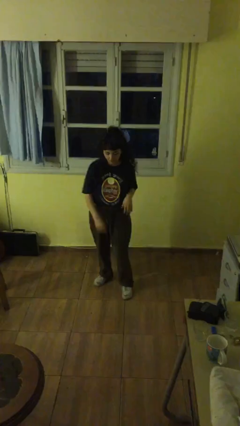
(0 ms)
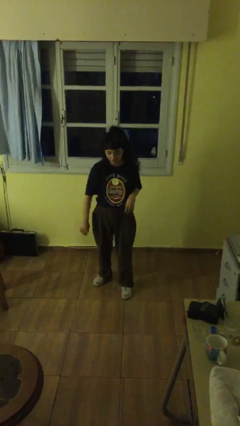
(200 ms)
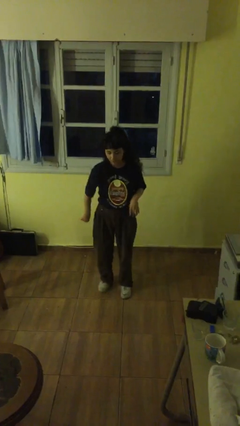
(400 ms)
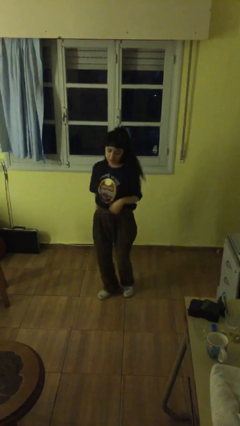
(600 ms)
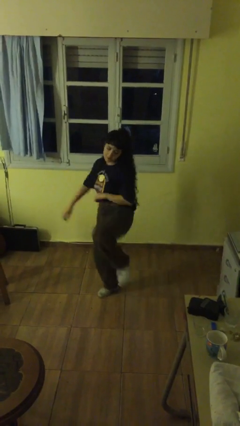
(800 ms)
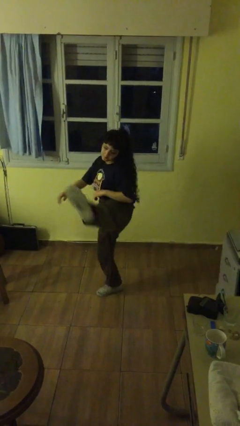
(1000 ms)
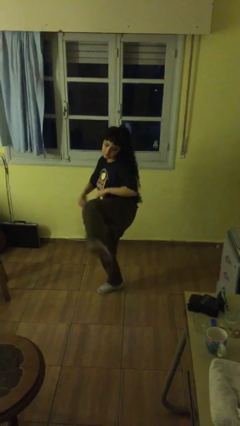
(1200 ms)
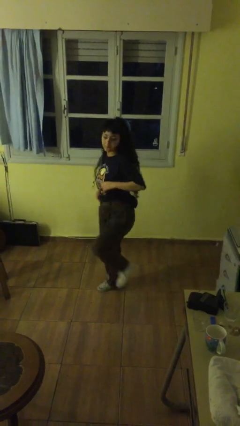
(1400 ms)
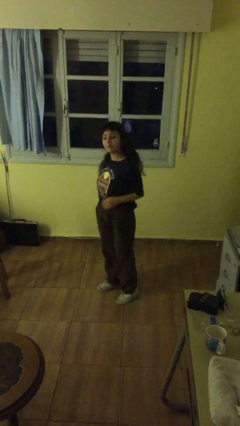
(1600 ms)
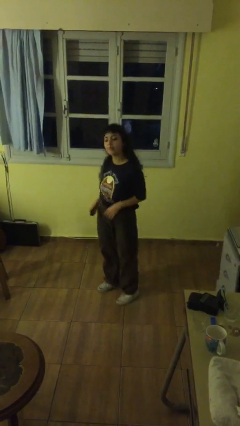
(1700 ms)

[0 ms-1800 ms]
person karate kicks

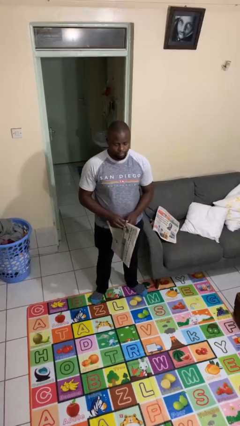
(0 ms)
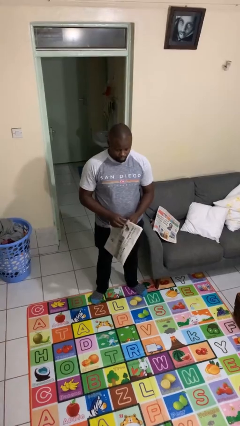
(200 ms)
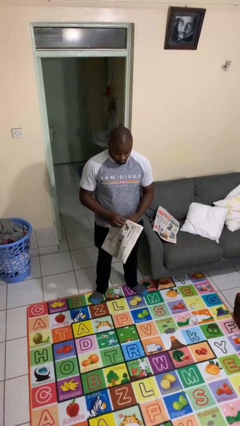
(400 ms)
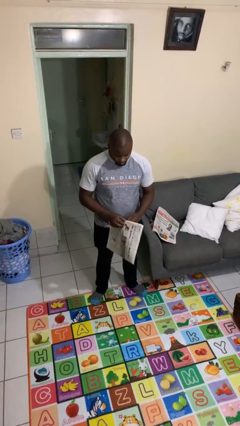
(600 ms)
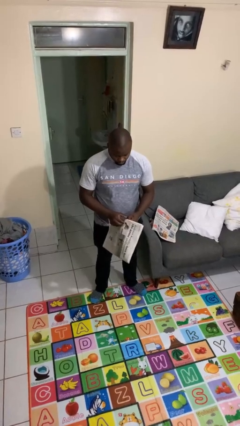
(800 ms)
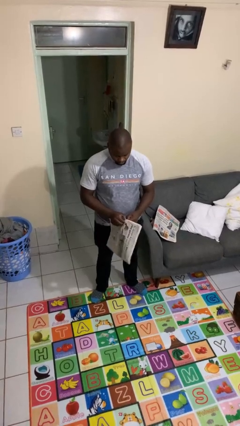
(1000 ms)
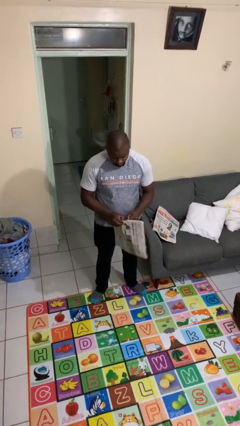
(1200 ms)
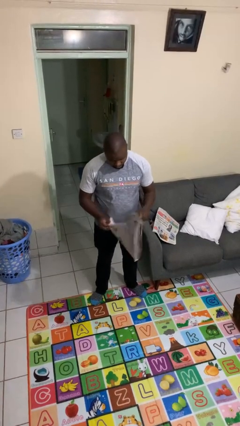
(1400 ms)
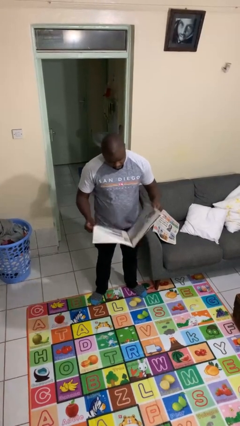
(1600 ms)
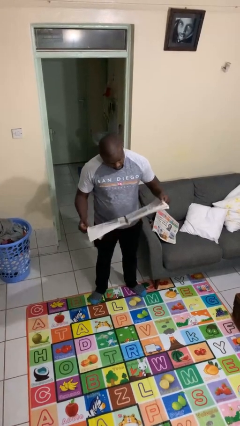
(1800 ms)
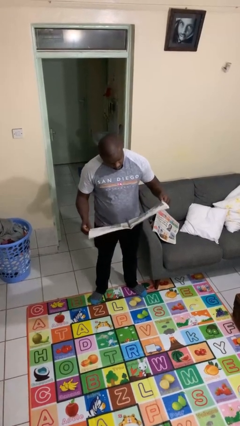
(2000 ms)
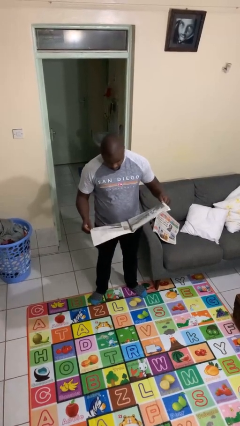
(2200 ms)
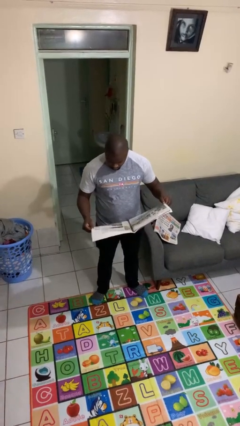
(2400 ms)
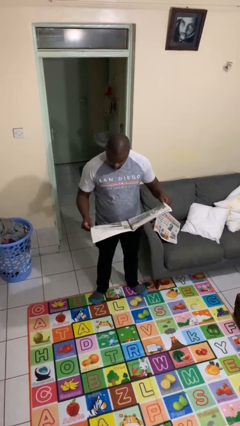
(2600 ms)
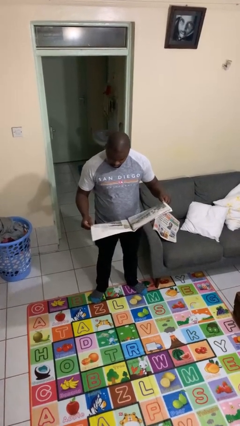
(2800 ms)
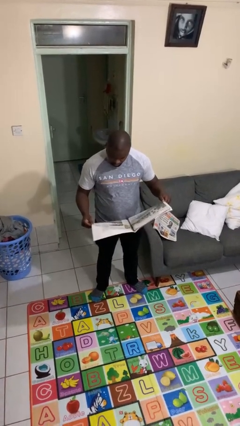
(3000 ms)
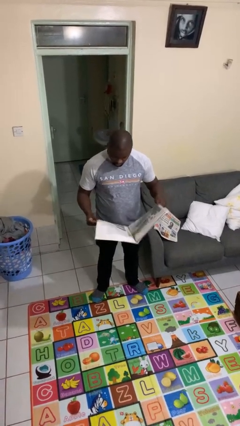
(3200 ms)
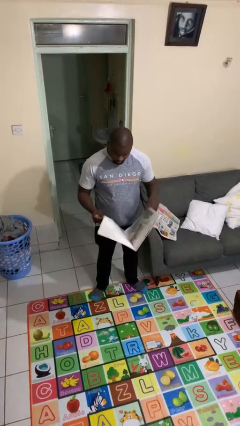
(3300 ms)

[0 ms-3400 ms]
person reads newspaper

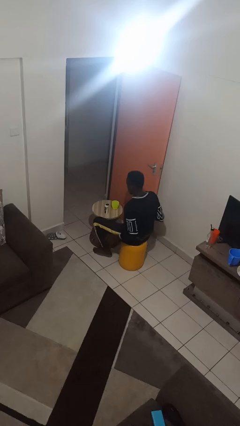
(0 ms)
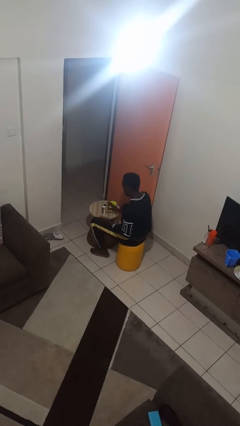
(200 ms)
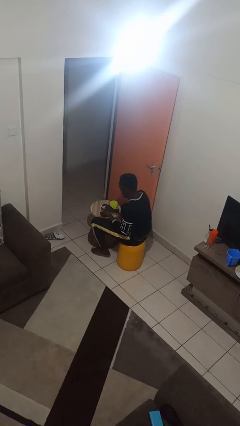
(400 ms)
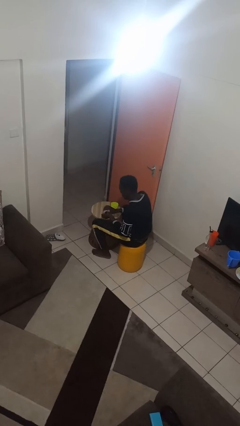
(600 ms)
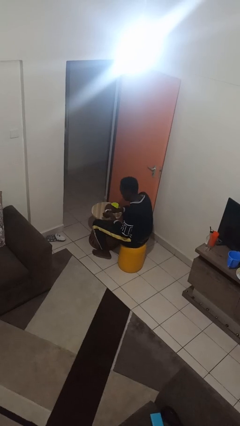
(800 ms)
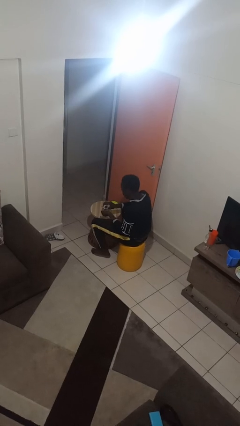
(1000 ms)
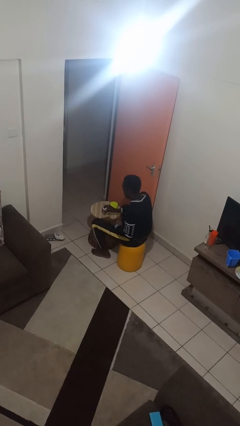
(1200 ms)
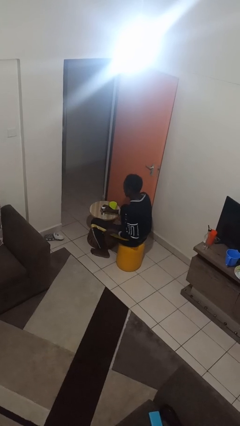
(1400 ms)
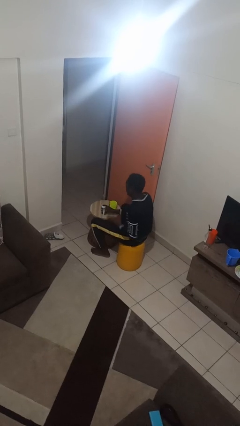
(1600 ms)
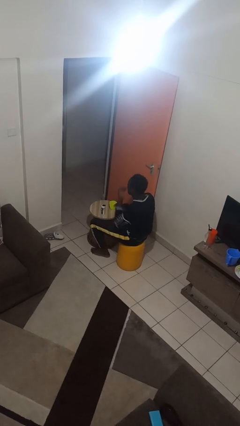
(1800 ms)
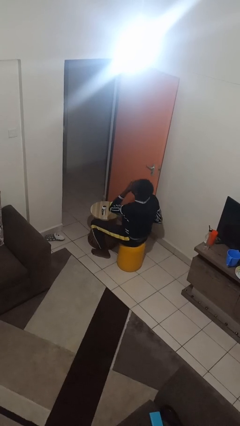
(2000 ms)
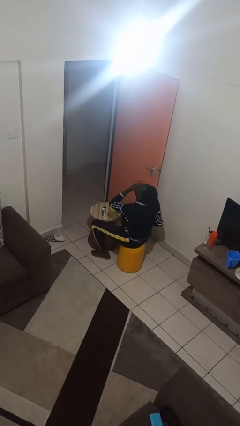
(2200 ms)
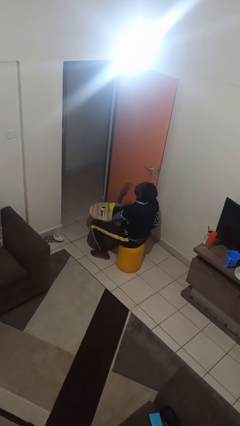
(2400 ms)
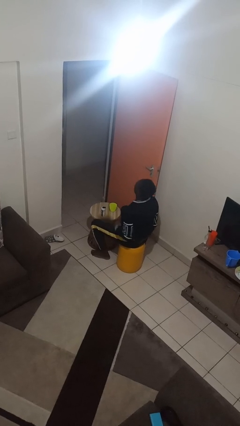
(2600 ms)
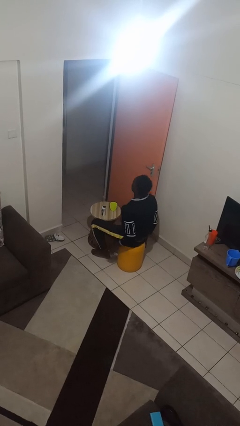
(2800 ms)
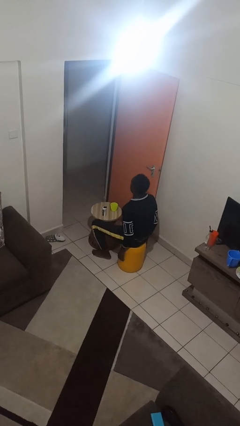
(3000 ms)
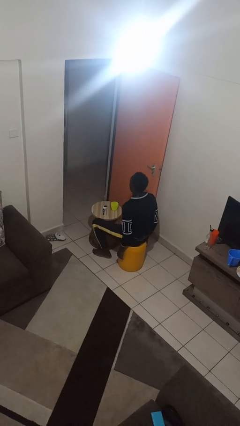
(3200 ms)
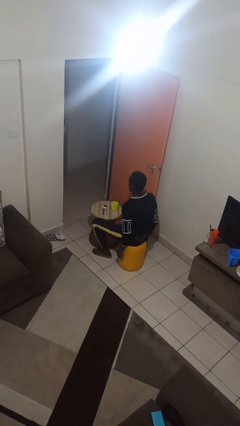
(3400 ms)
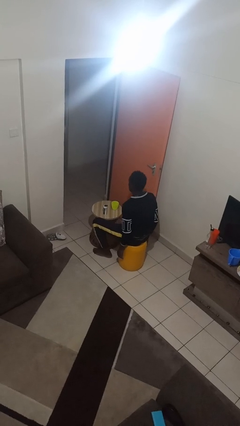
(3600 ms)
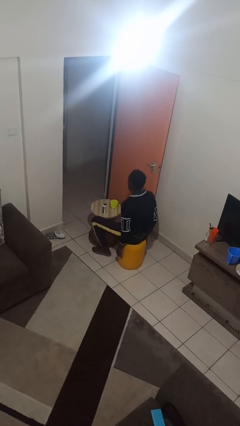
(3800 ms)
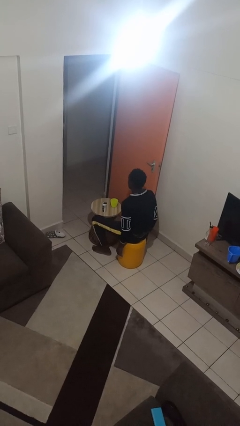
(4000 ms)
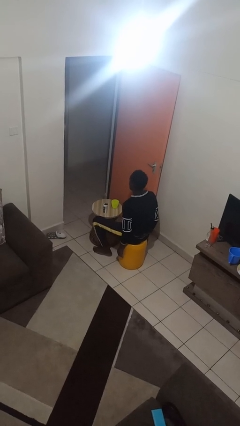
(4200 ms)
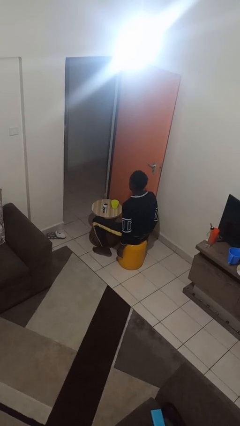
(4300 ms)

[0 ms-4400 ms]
person takes medicine pills

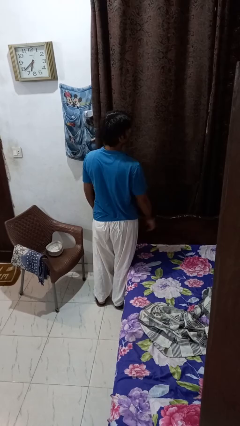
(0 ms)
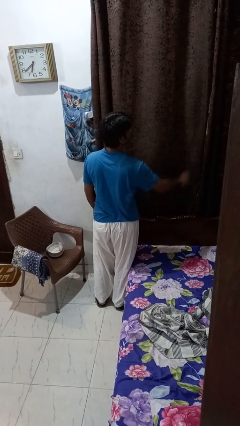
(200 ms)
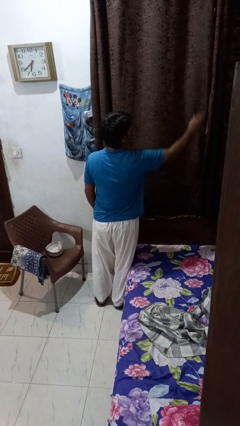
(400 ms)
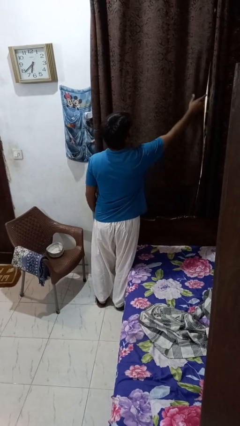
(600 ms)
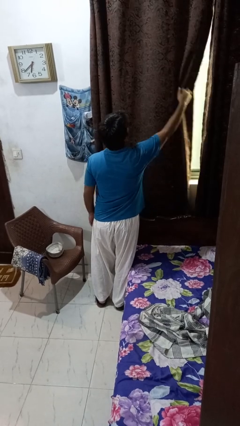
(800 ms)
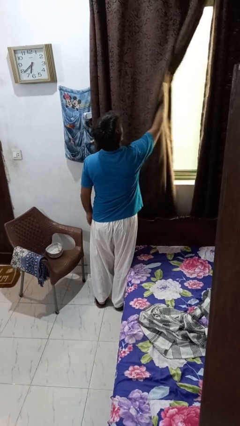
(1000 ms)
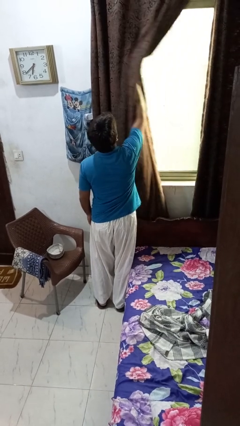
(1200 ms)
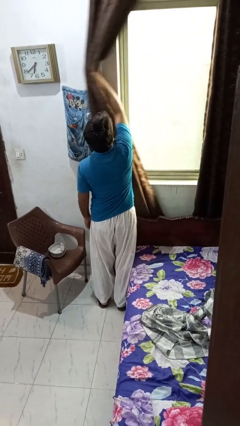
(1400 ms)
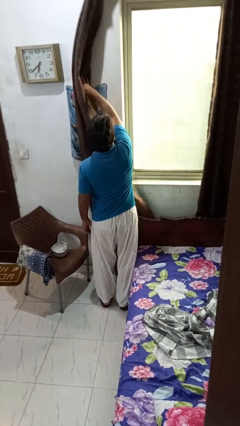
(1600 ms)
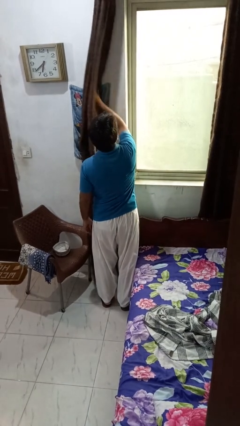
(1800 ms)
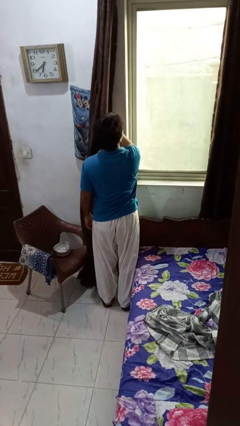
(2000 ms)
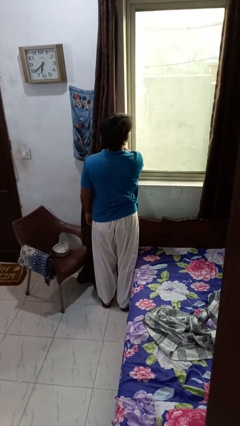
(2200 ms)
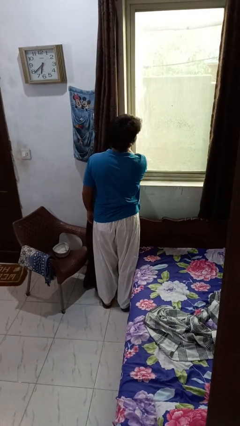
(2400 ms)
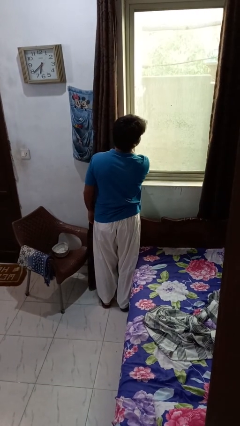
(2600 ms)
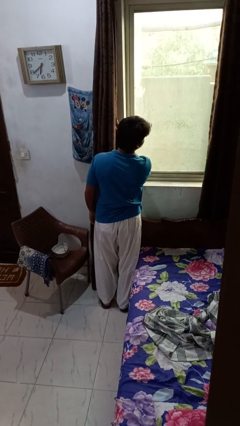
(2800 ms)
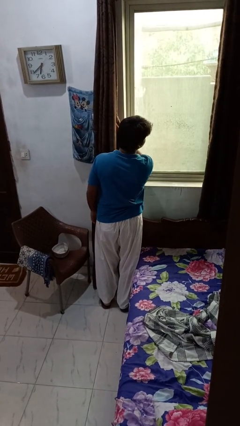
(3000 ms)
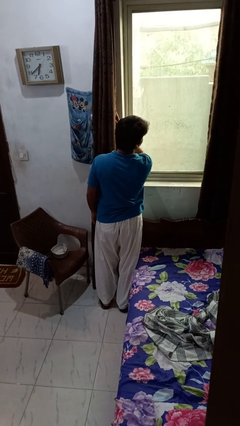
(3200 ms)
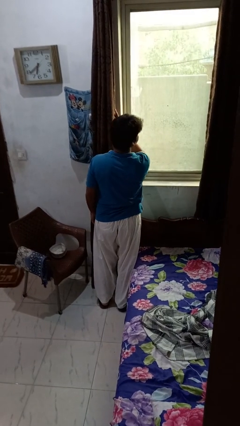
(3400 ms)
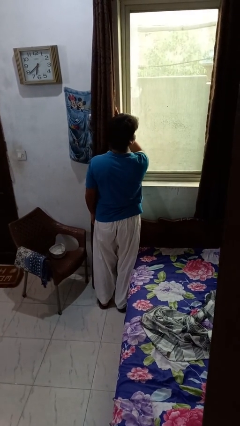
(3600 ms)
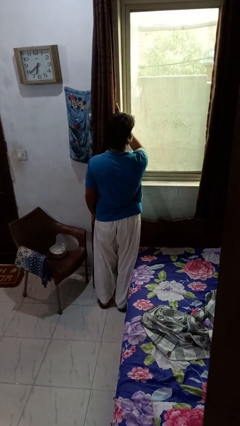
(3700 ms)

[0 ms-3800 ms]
person opens curtains

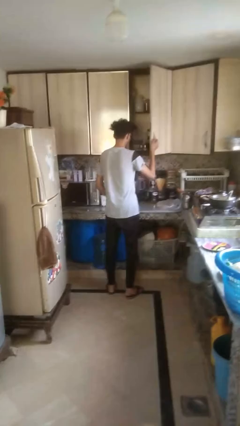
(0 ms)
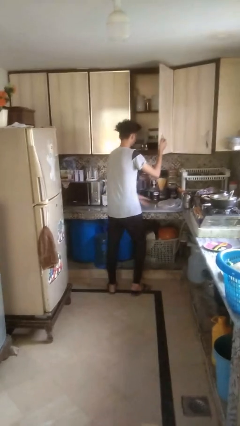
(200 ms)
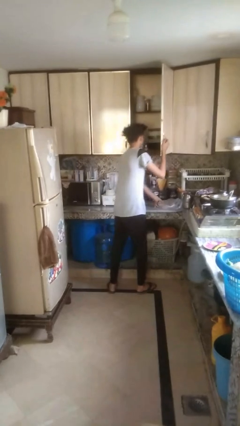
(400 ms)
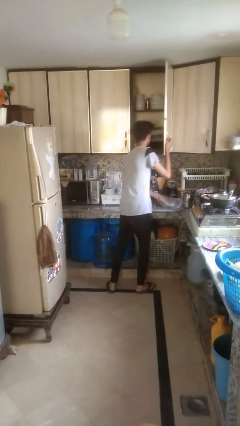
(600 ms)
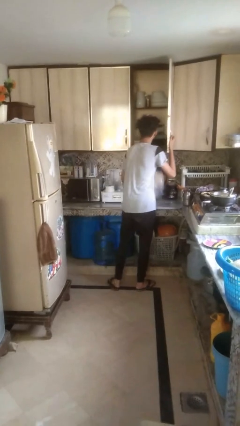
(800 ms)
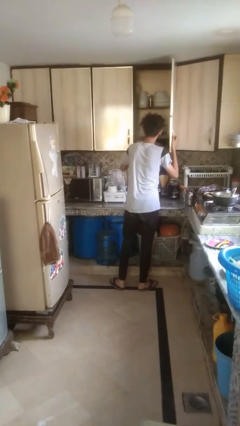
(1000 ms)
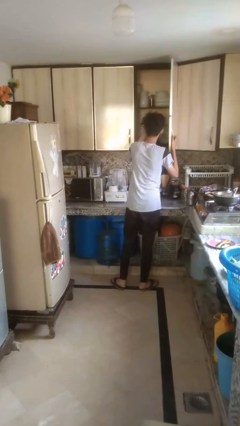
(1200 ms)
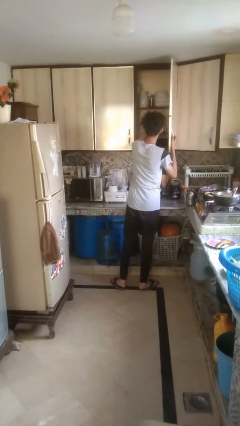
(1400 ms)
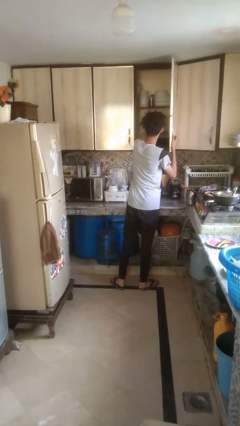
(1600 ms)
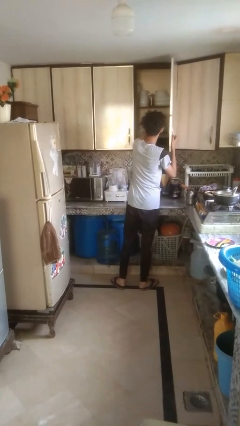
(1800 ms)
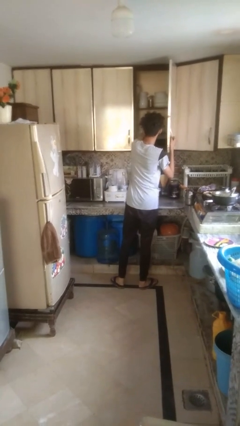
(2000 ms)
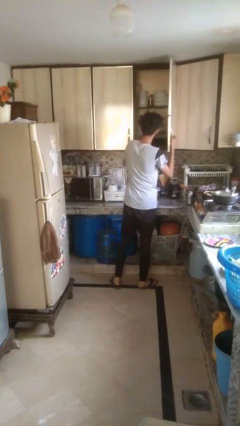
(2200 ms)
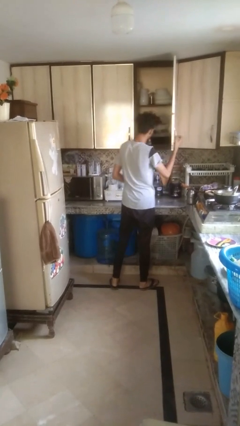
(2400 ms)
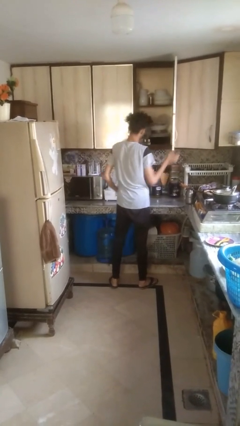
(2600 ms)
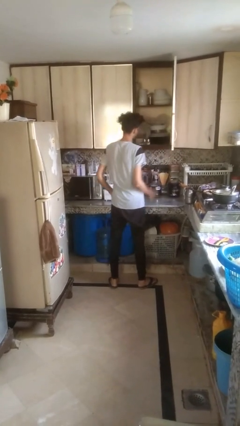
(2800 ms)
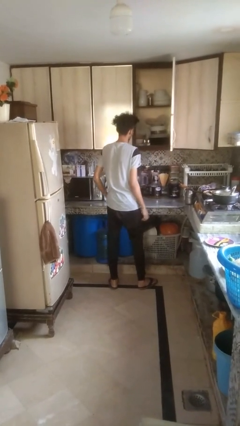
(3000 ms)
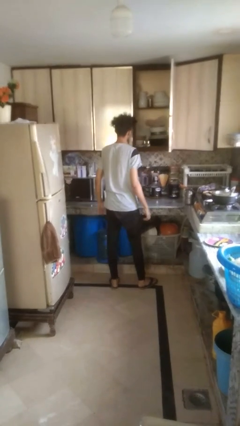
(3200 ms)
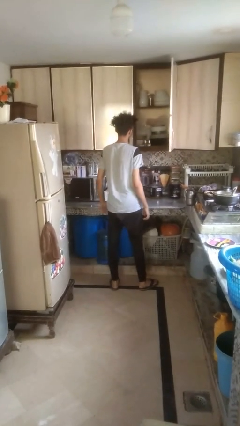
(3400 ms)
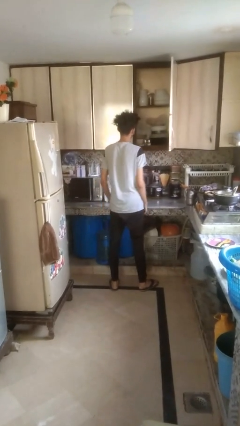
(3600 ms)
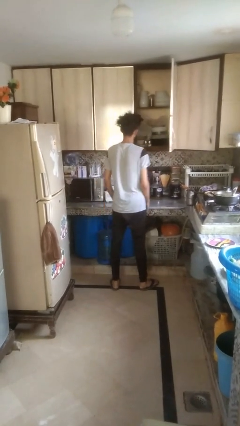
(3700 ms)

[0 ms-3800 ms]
person puts object in cabinet

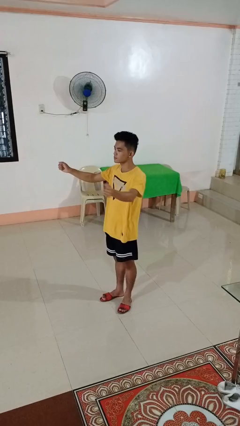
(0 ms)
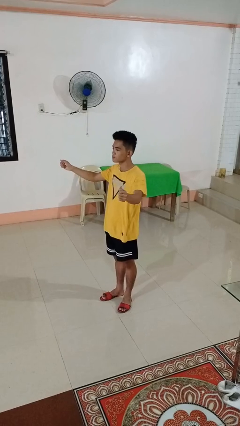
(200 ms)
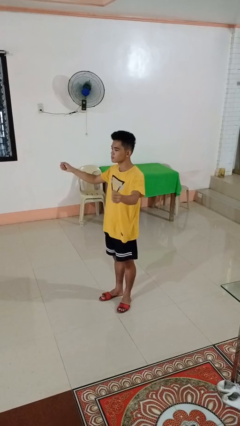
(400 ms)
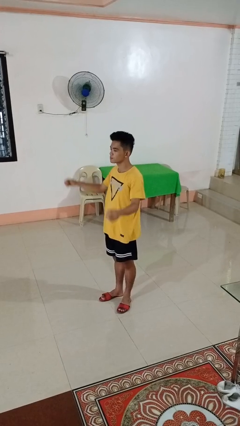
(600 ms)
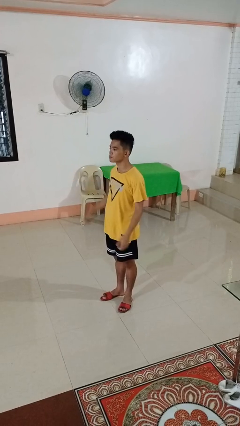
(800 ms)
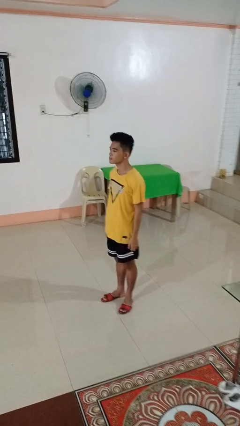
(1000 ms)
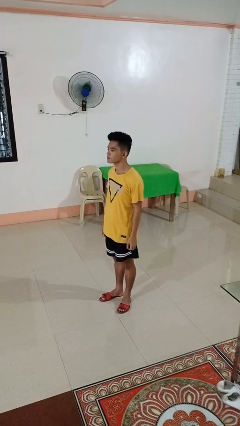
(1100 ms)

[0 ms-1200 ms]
person gestures zoom out
